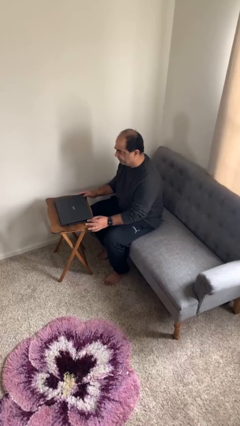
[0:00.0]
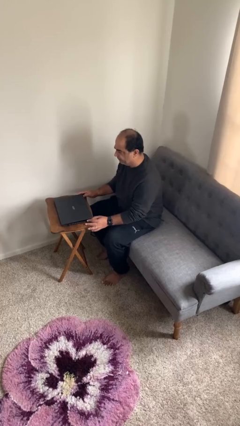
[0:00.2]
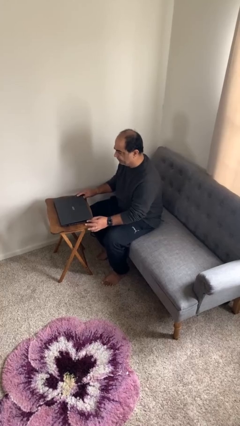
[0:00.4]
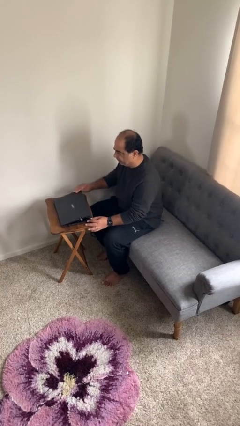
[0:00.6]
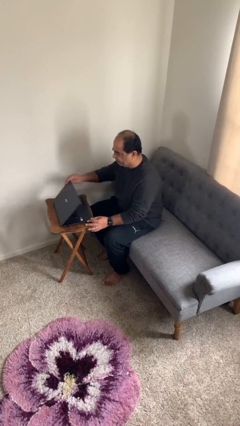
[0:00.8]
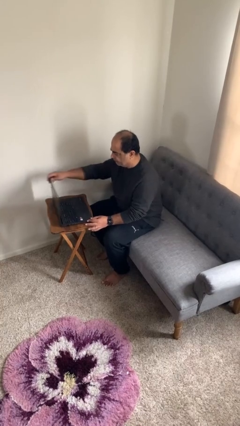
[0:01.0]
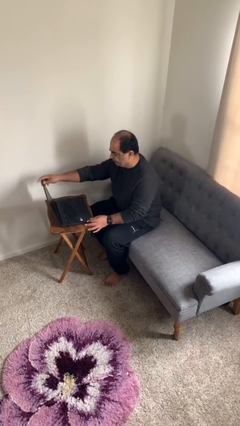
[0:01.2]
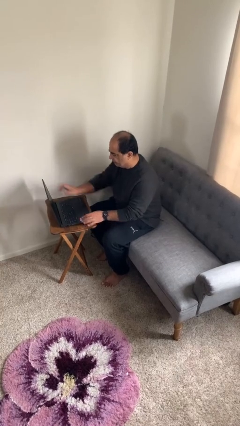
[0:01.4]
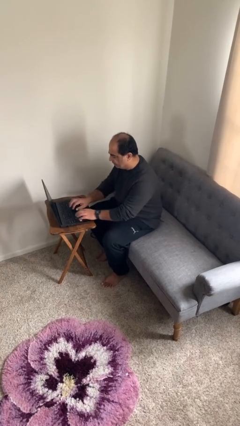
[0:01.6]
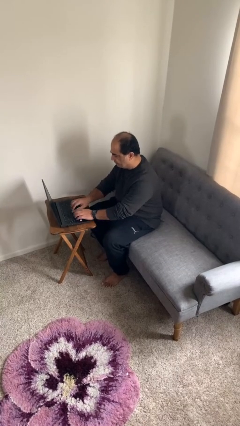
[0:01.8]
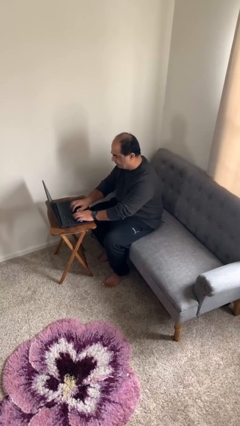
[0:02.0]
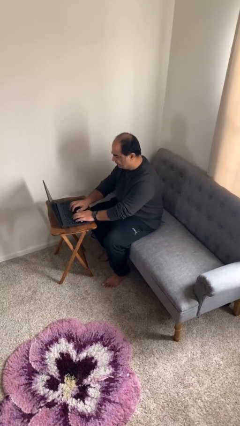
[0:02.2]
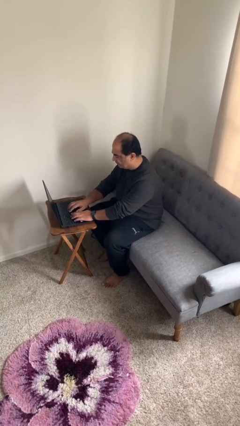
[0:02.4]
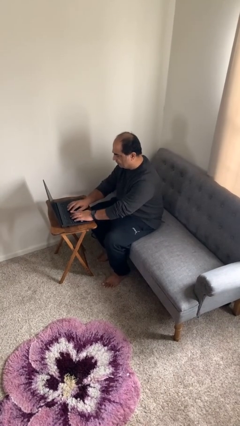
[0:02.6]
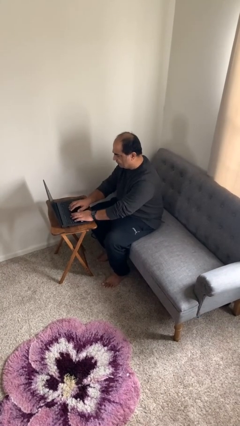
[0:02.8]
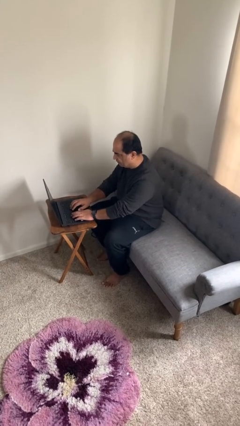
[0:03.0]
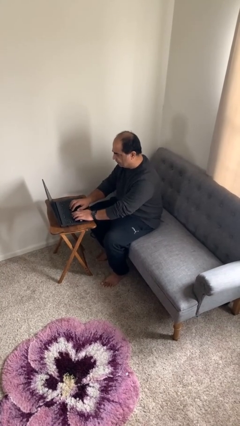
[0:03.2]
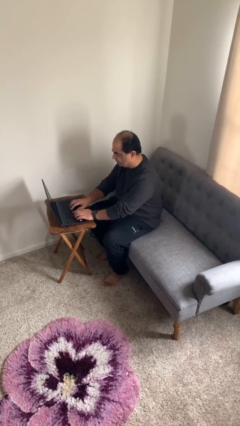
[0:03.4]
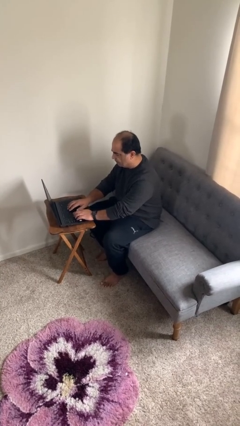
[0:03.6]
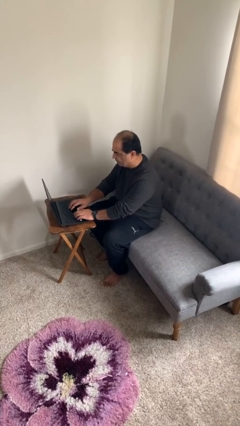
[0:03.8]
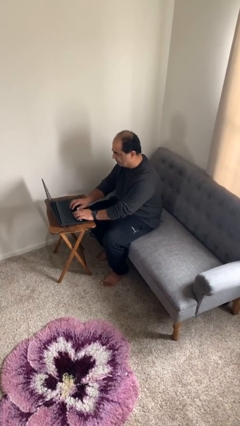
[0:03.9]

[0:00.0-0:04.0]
person interacts with laptop

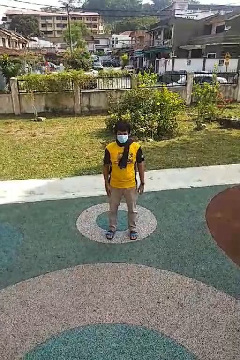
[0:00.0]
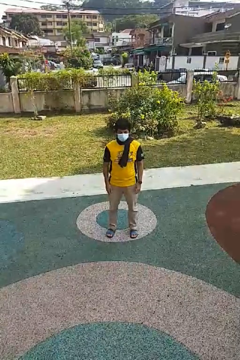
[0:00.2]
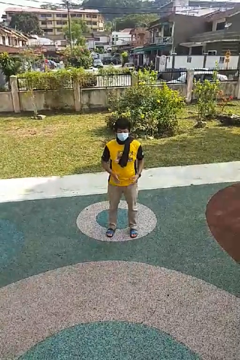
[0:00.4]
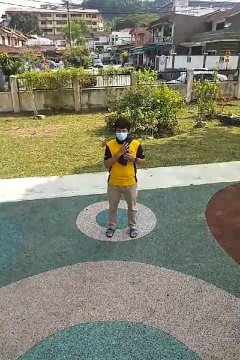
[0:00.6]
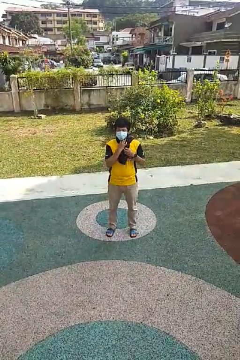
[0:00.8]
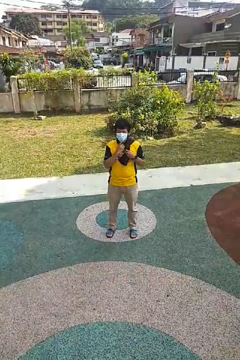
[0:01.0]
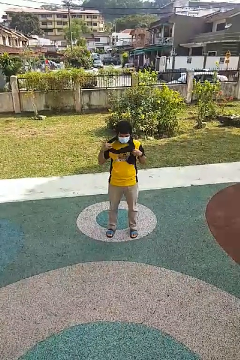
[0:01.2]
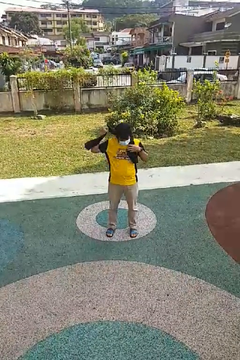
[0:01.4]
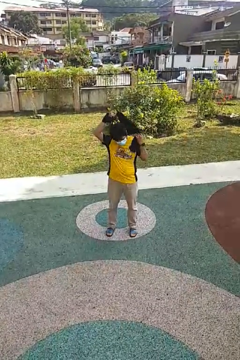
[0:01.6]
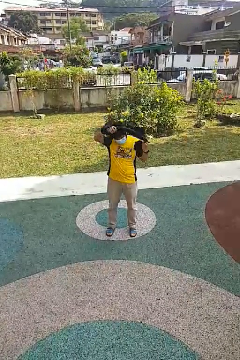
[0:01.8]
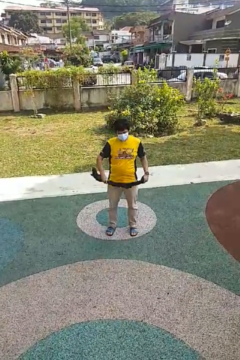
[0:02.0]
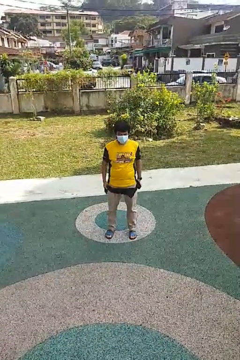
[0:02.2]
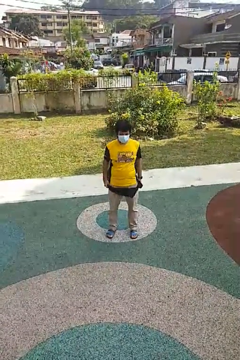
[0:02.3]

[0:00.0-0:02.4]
person takes off scarf

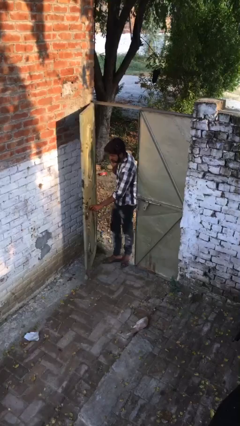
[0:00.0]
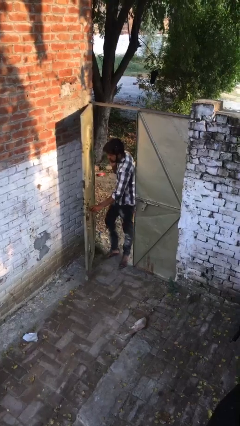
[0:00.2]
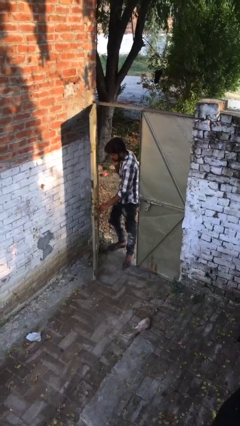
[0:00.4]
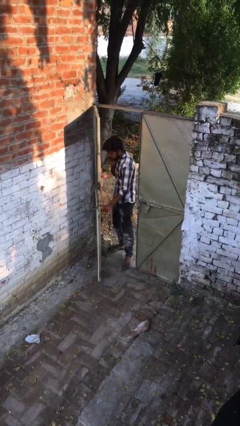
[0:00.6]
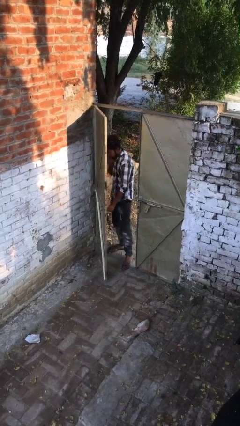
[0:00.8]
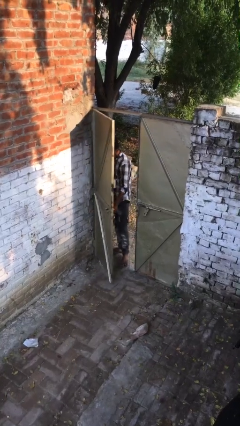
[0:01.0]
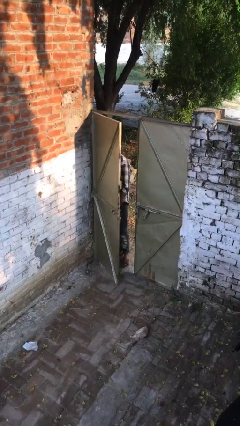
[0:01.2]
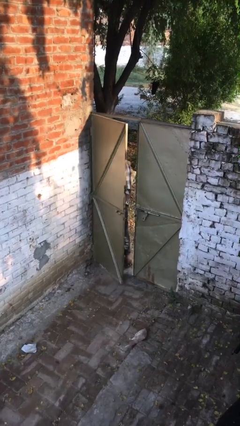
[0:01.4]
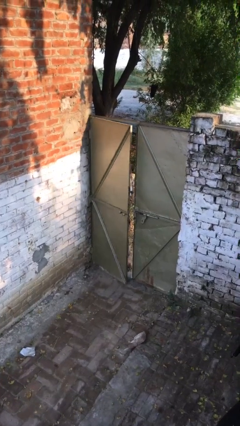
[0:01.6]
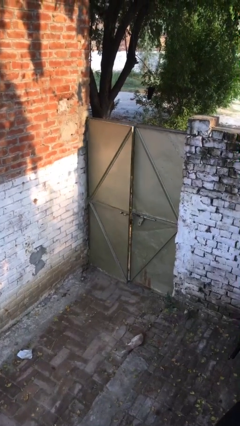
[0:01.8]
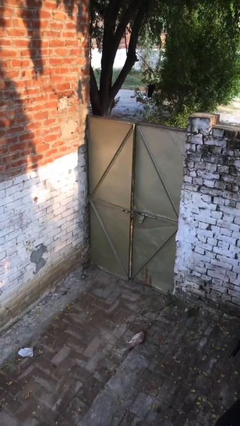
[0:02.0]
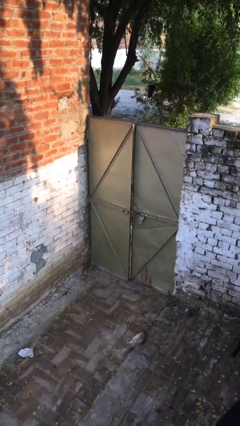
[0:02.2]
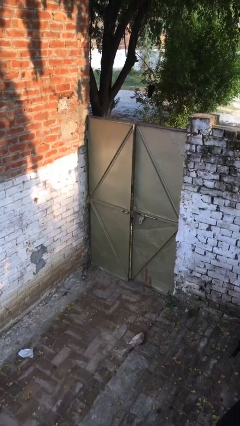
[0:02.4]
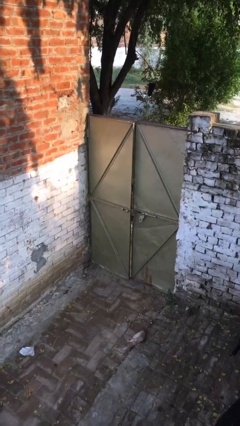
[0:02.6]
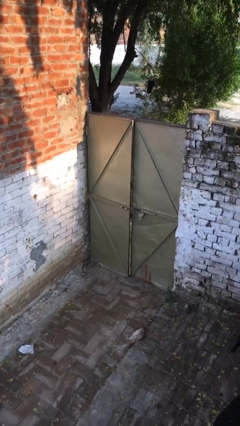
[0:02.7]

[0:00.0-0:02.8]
person closes facility door

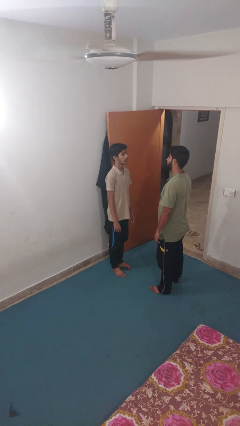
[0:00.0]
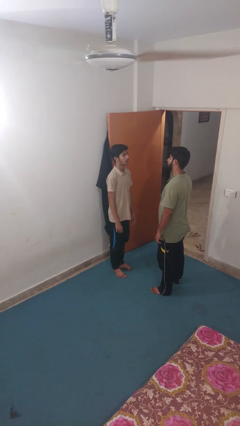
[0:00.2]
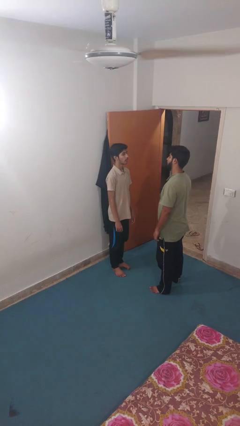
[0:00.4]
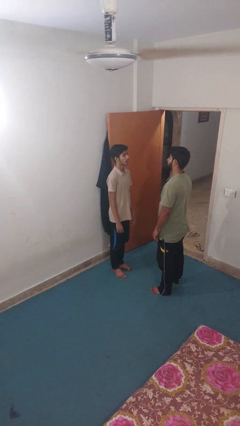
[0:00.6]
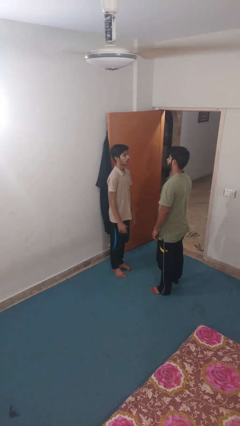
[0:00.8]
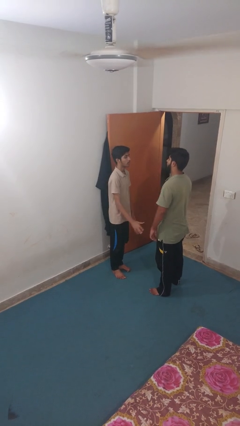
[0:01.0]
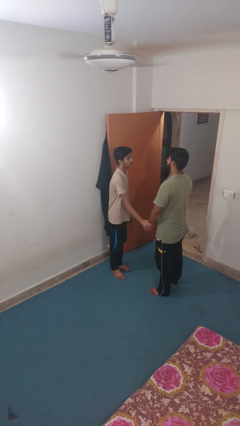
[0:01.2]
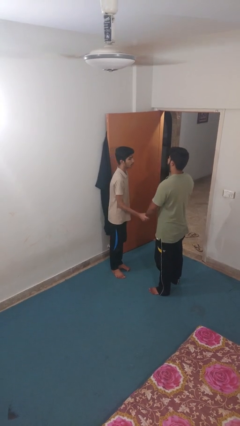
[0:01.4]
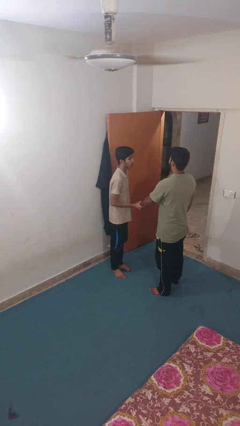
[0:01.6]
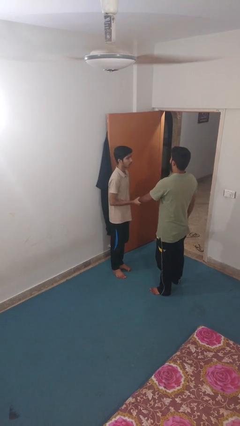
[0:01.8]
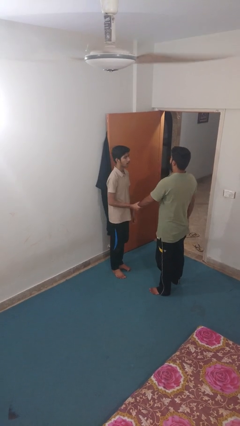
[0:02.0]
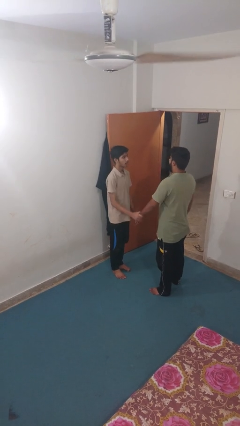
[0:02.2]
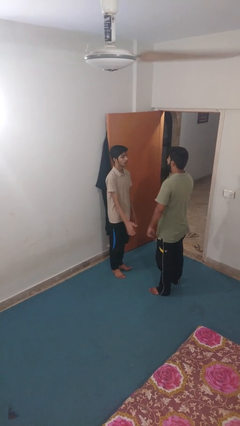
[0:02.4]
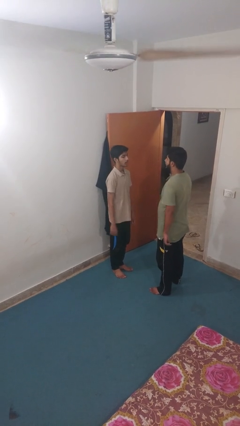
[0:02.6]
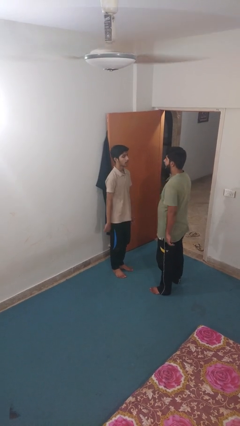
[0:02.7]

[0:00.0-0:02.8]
person grabs person by forearm

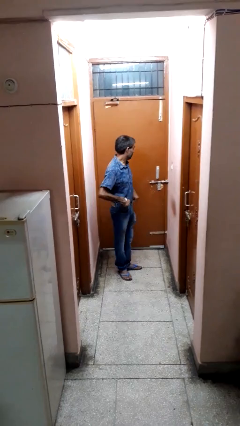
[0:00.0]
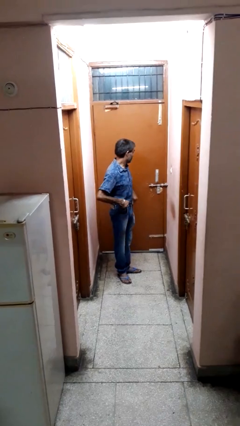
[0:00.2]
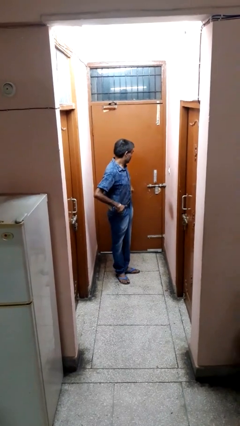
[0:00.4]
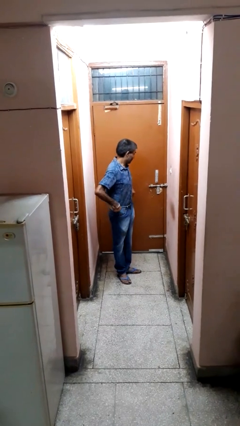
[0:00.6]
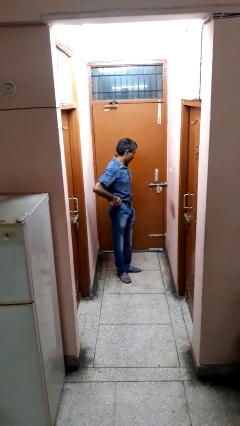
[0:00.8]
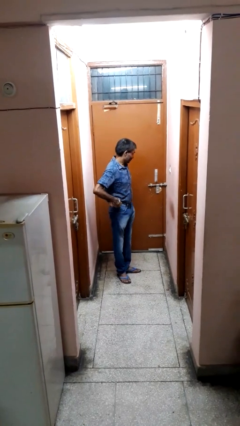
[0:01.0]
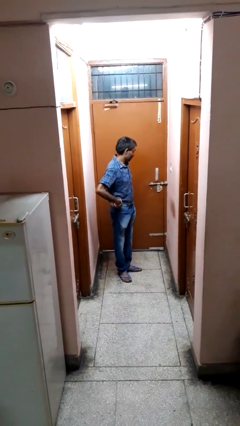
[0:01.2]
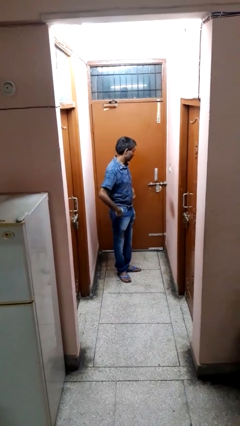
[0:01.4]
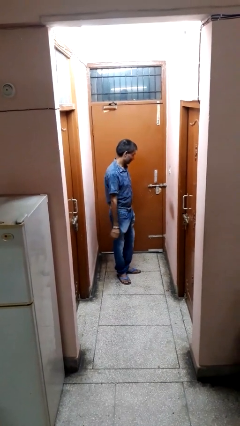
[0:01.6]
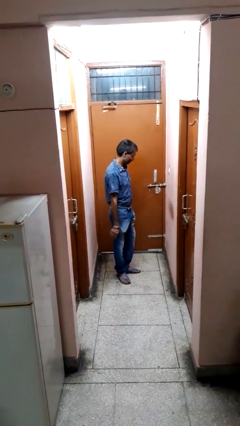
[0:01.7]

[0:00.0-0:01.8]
person hikes up pants

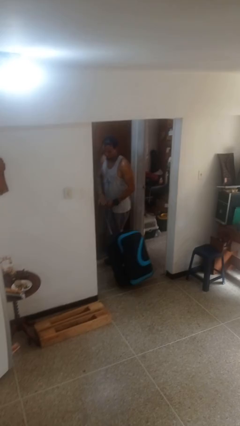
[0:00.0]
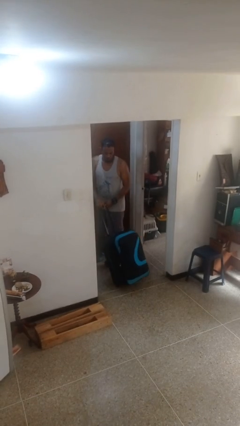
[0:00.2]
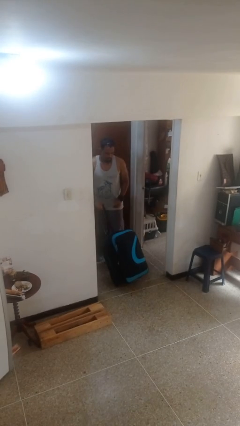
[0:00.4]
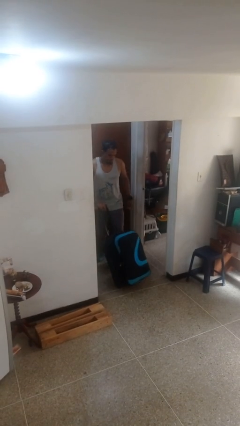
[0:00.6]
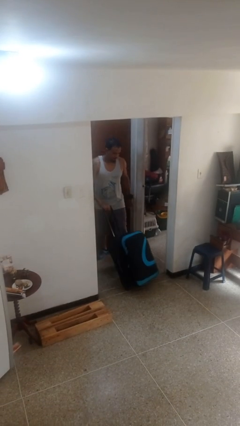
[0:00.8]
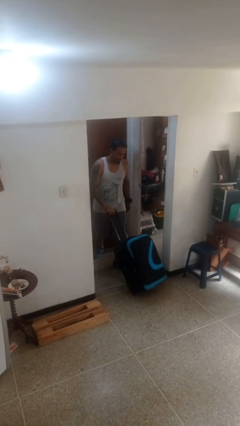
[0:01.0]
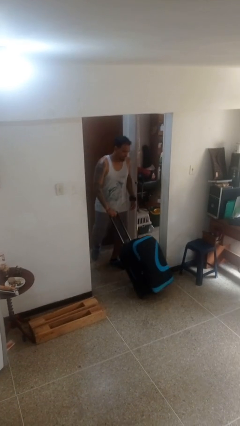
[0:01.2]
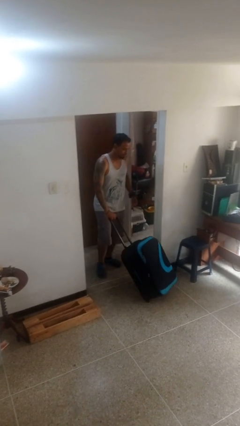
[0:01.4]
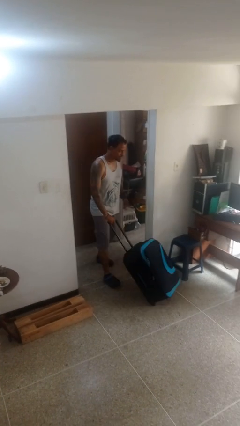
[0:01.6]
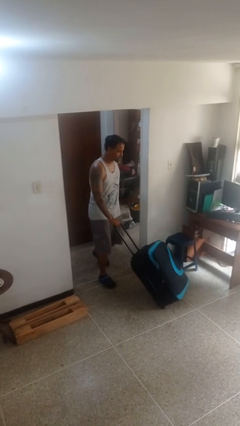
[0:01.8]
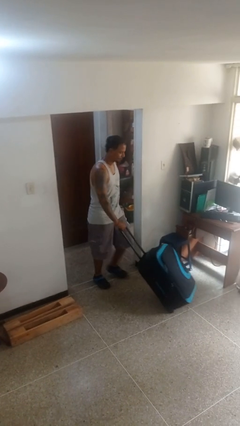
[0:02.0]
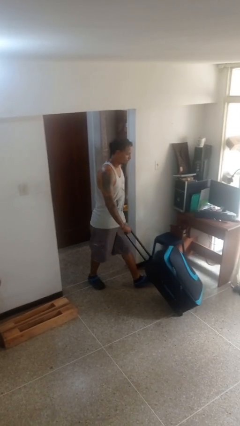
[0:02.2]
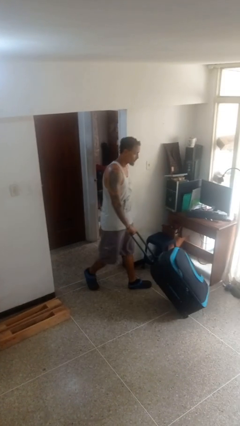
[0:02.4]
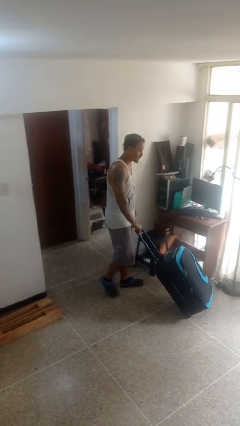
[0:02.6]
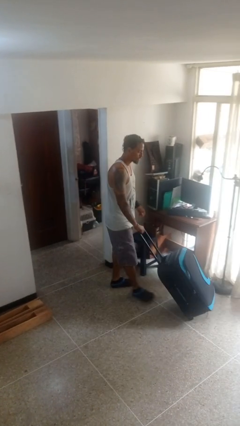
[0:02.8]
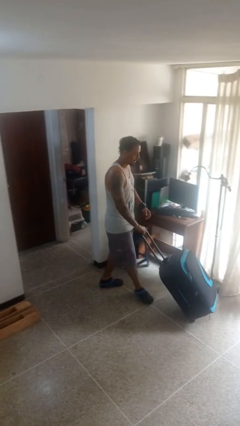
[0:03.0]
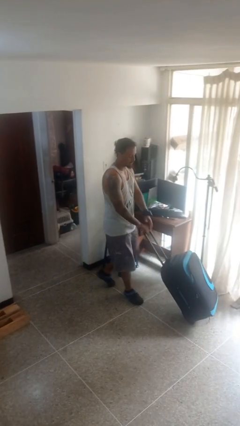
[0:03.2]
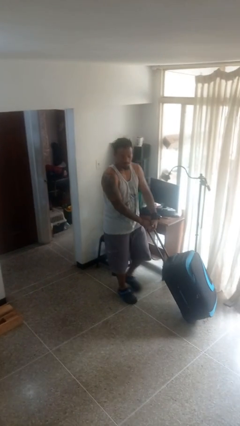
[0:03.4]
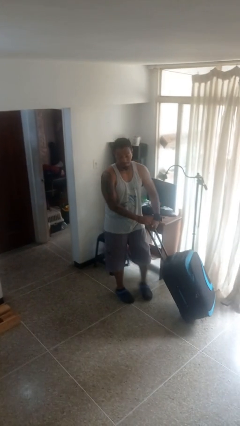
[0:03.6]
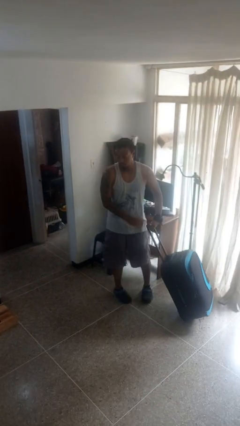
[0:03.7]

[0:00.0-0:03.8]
person pushes wheeled cart
